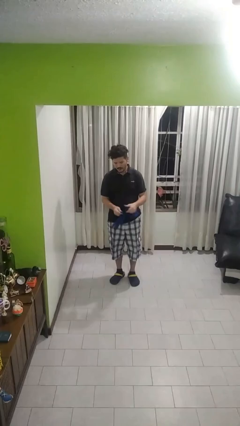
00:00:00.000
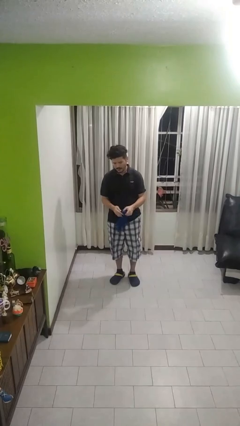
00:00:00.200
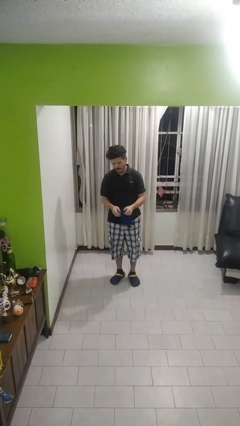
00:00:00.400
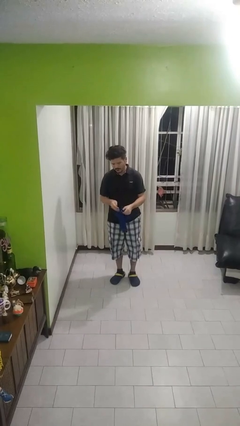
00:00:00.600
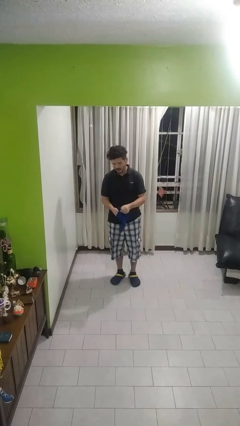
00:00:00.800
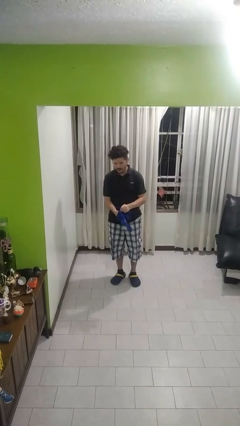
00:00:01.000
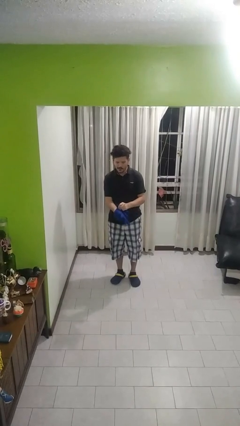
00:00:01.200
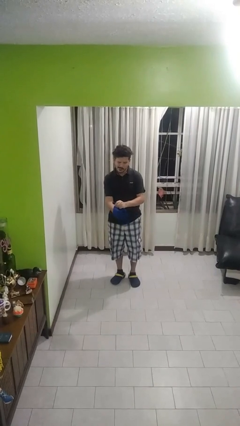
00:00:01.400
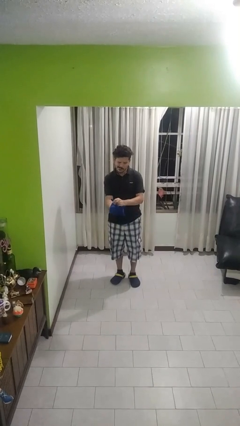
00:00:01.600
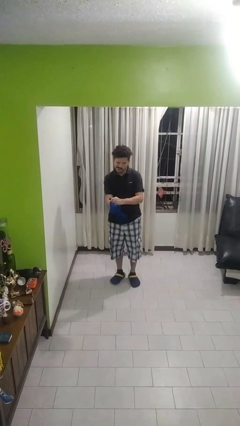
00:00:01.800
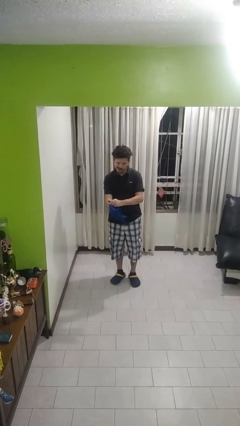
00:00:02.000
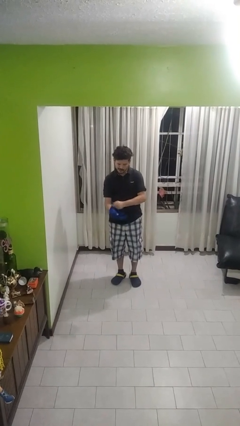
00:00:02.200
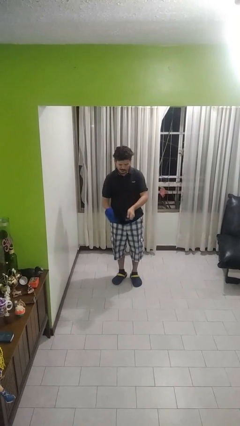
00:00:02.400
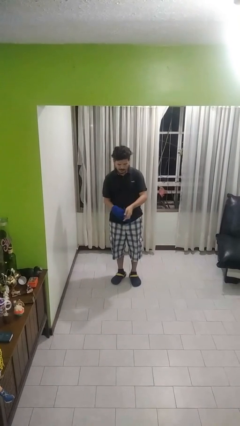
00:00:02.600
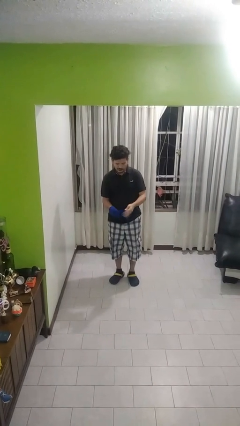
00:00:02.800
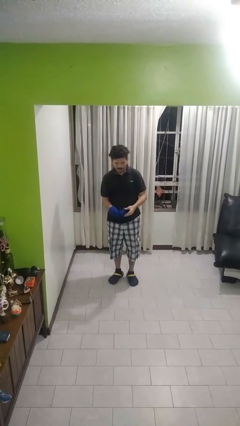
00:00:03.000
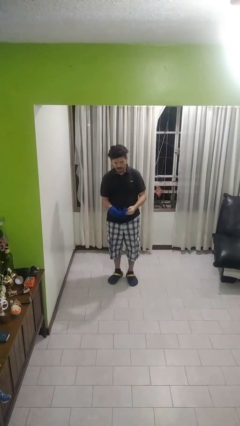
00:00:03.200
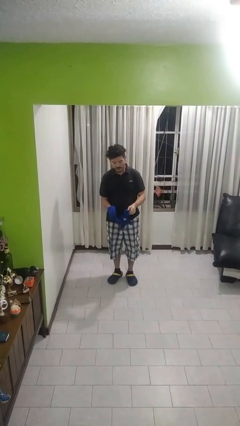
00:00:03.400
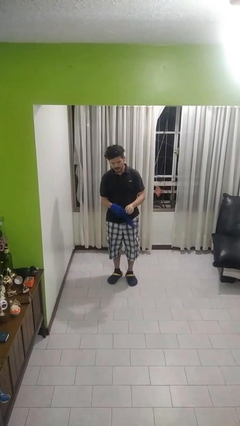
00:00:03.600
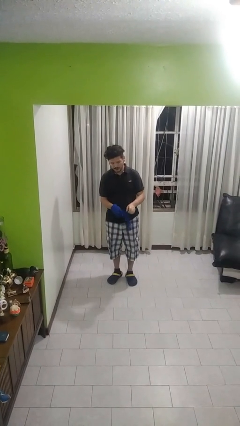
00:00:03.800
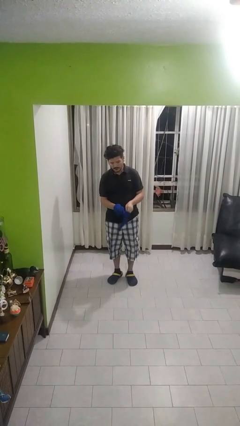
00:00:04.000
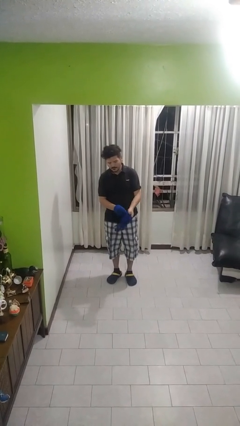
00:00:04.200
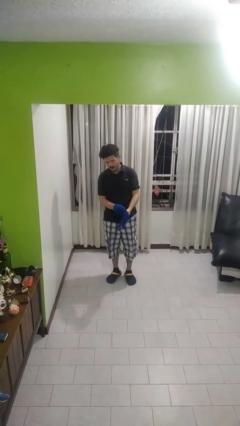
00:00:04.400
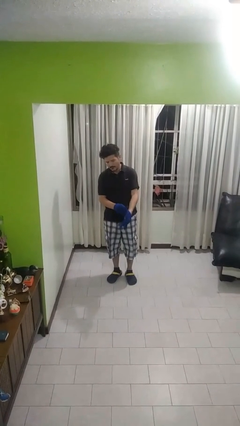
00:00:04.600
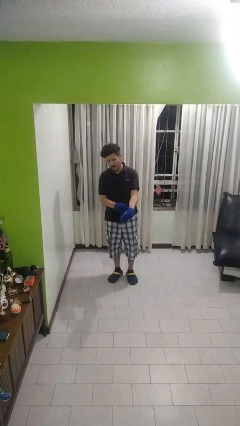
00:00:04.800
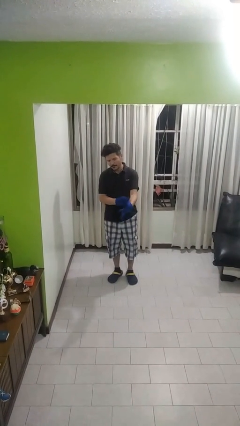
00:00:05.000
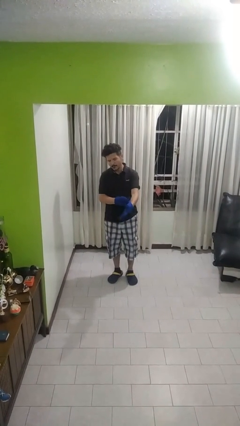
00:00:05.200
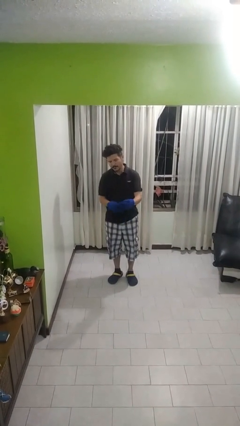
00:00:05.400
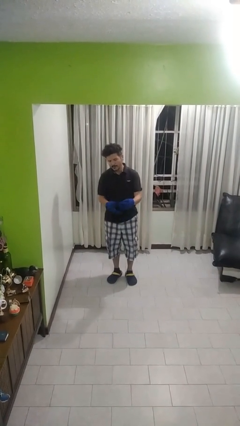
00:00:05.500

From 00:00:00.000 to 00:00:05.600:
person puts on gloves

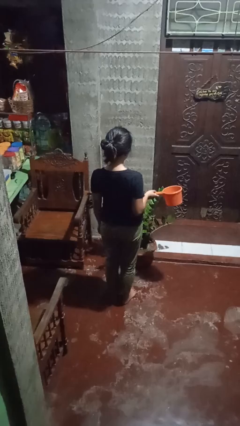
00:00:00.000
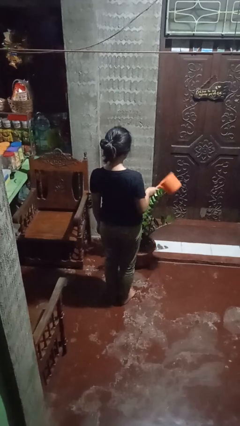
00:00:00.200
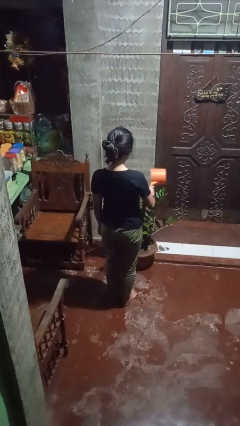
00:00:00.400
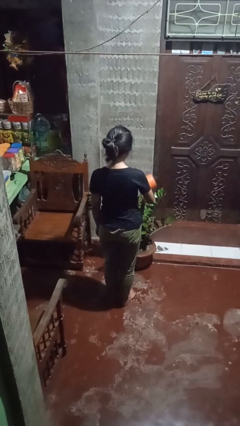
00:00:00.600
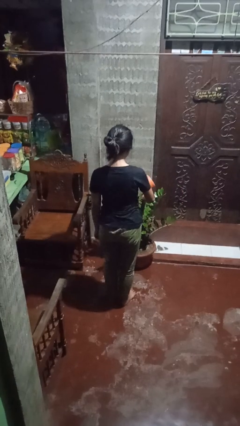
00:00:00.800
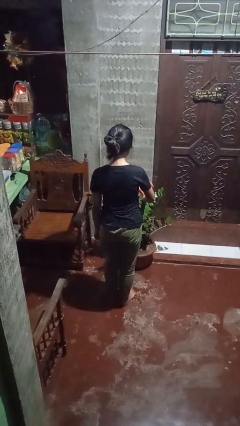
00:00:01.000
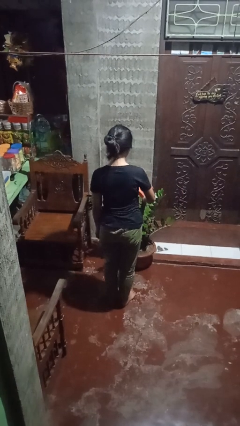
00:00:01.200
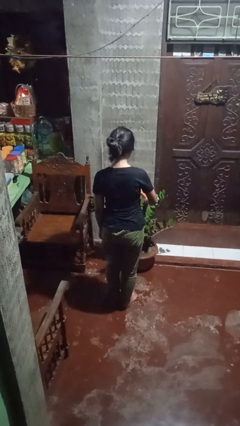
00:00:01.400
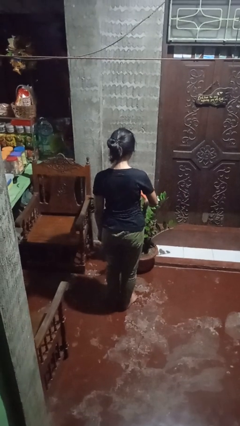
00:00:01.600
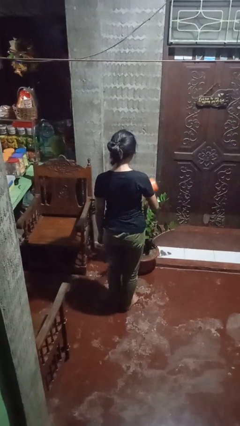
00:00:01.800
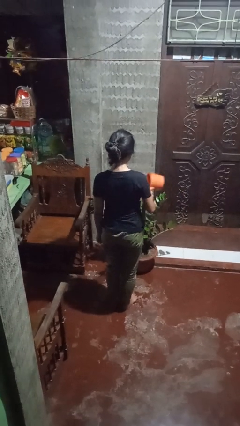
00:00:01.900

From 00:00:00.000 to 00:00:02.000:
person waters houseplant

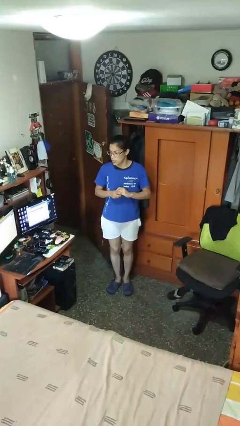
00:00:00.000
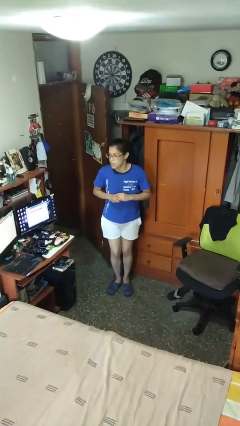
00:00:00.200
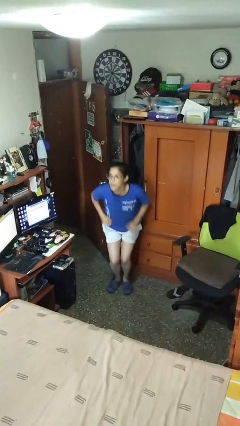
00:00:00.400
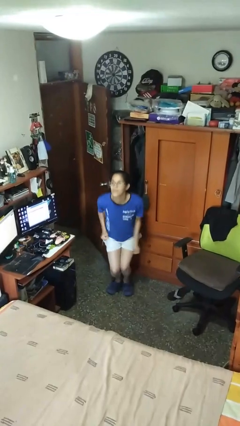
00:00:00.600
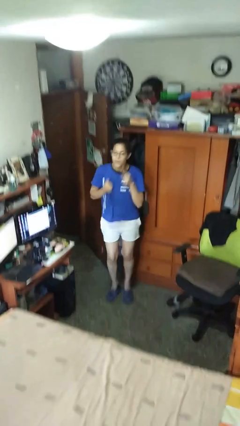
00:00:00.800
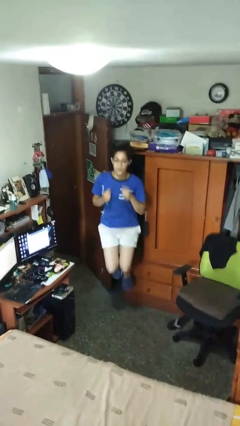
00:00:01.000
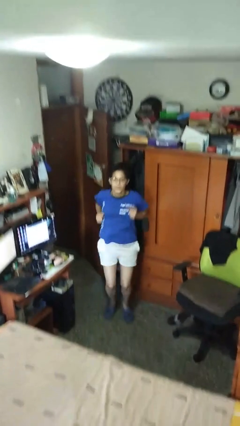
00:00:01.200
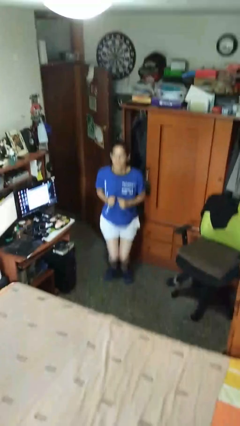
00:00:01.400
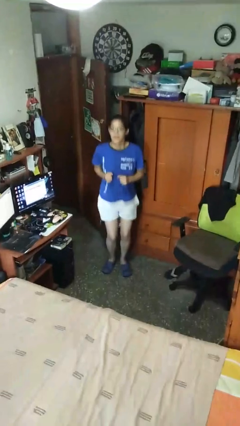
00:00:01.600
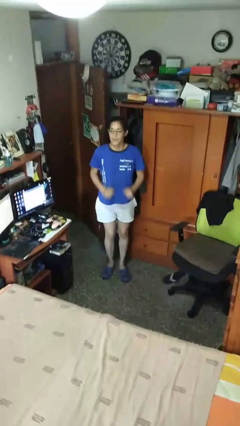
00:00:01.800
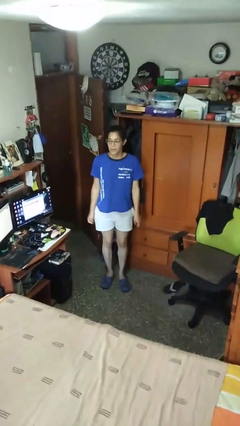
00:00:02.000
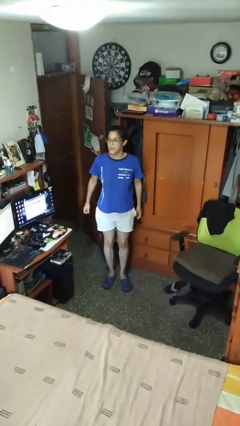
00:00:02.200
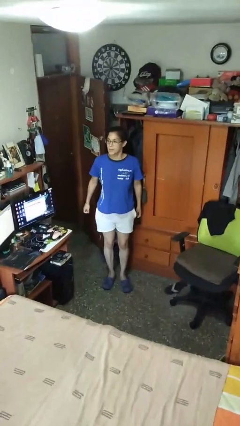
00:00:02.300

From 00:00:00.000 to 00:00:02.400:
person jumps

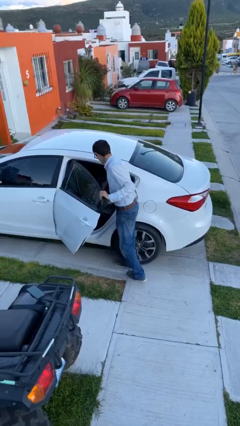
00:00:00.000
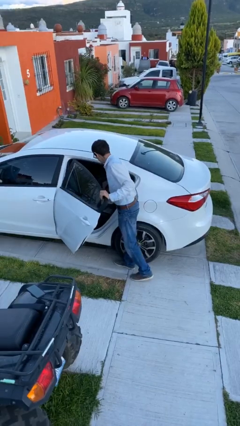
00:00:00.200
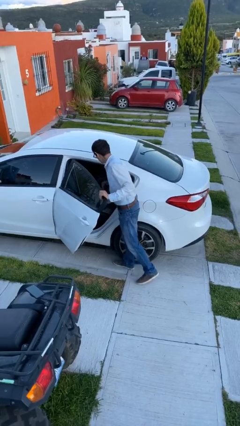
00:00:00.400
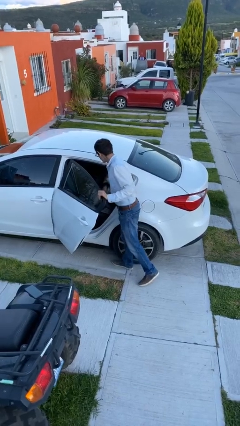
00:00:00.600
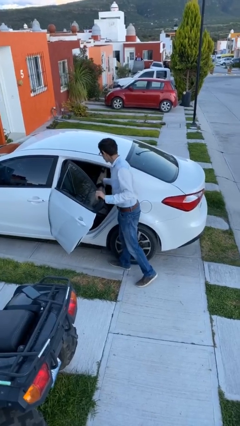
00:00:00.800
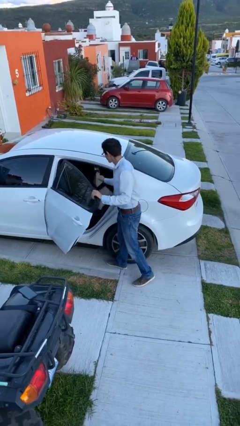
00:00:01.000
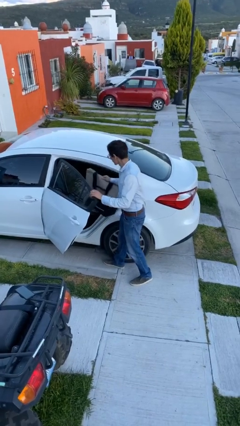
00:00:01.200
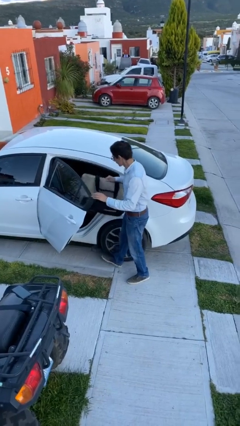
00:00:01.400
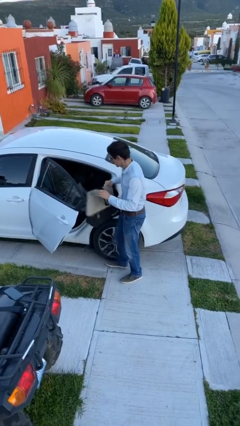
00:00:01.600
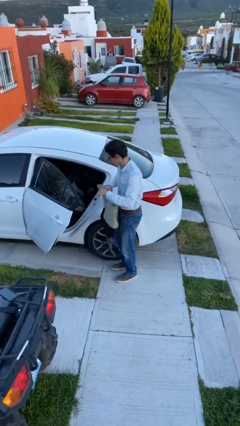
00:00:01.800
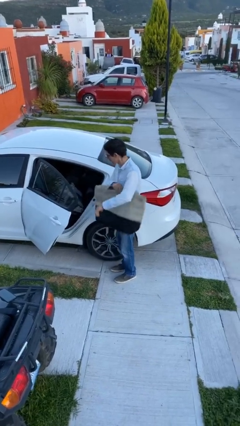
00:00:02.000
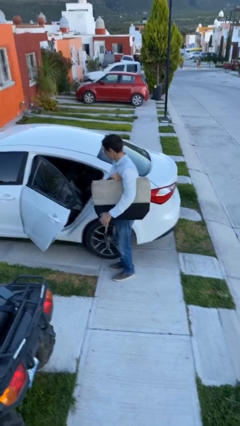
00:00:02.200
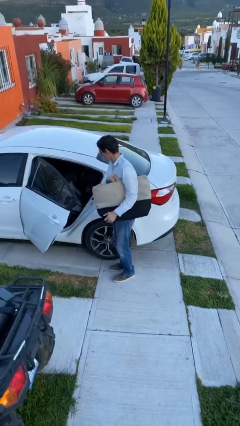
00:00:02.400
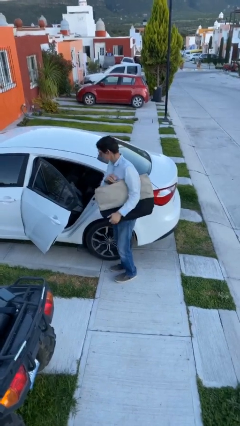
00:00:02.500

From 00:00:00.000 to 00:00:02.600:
person unloads car

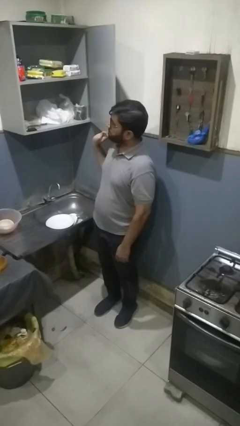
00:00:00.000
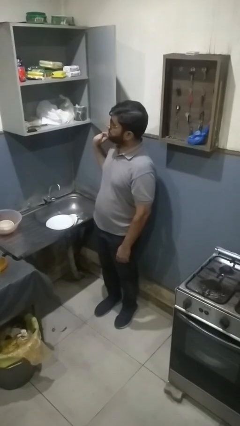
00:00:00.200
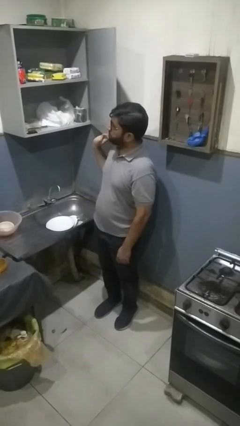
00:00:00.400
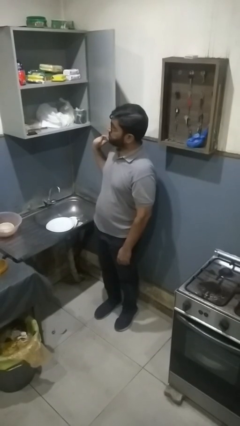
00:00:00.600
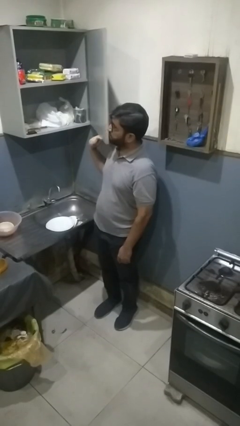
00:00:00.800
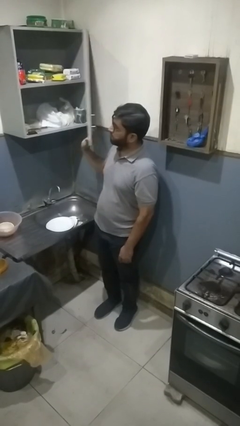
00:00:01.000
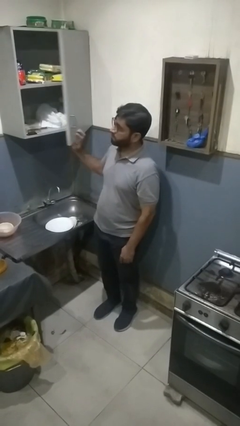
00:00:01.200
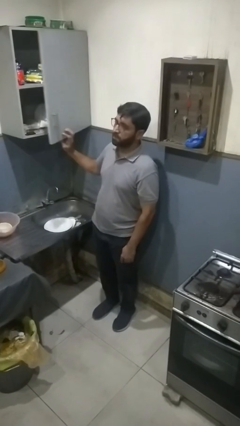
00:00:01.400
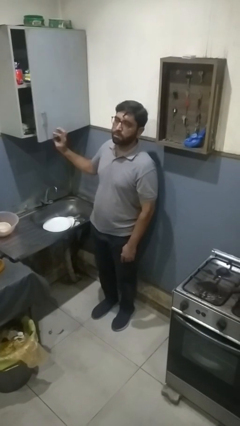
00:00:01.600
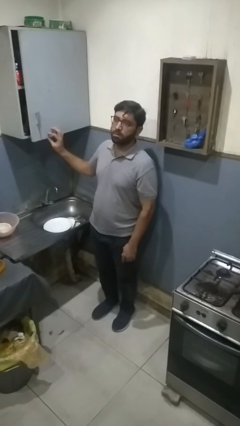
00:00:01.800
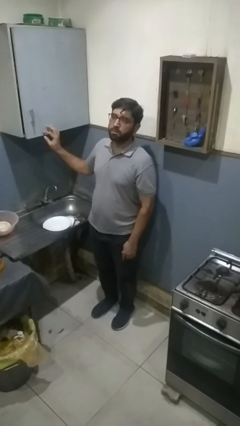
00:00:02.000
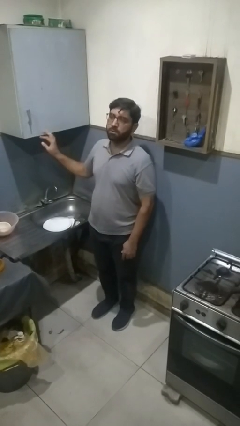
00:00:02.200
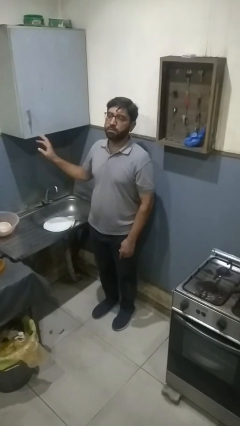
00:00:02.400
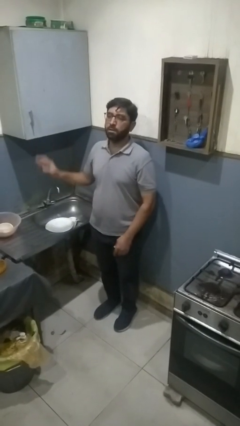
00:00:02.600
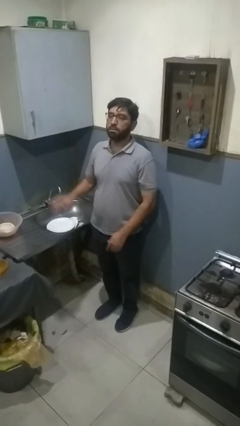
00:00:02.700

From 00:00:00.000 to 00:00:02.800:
person closes cabinet

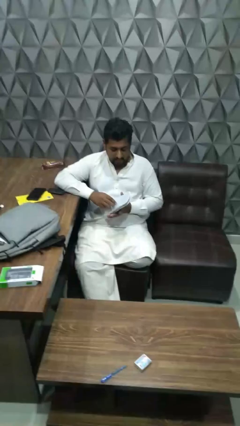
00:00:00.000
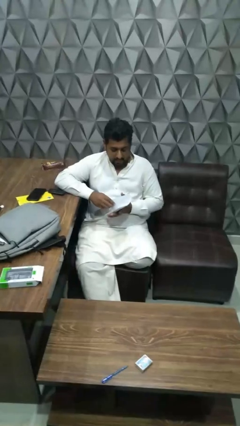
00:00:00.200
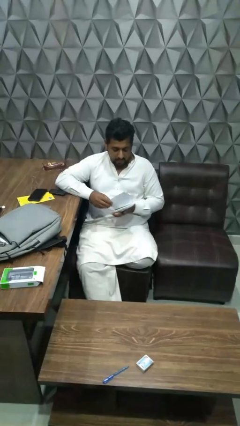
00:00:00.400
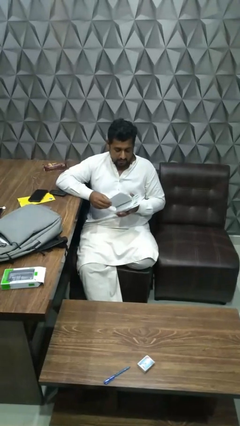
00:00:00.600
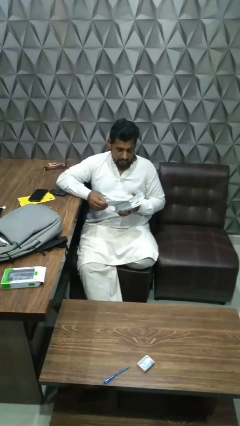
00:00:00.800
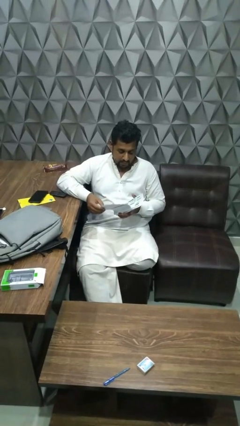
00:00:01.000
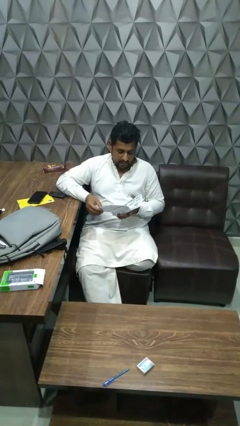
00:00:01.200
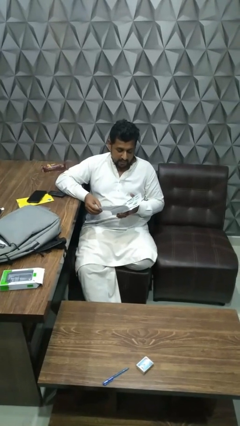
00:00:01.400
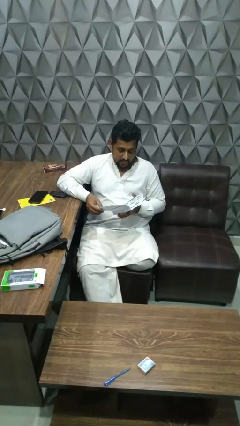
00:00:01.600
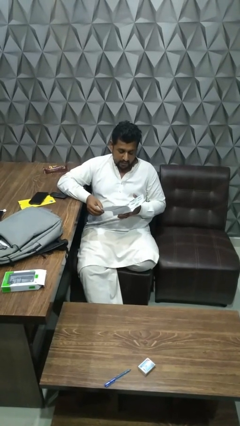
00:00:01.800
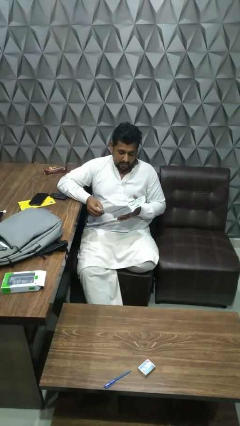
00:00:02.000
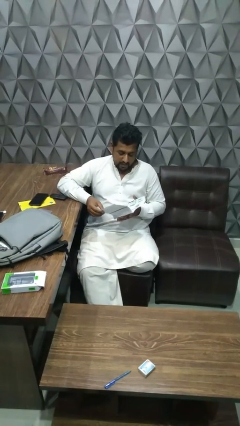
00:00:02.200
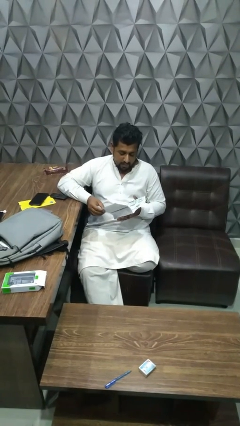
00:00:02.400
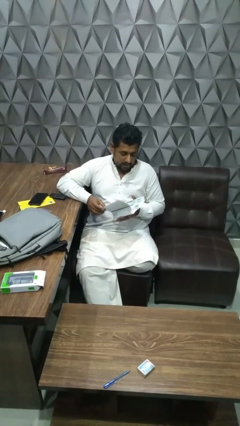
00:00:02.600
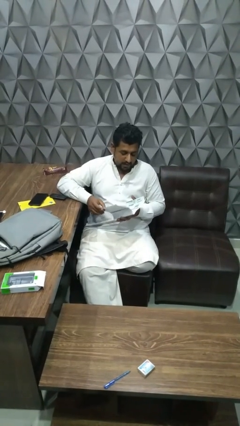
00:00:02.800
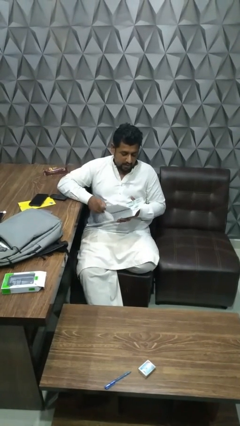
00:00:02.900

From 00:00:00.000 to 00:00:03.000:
person reads magazine
